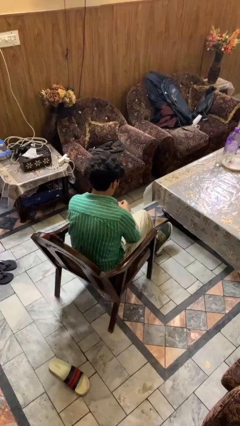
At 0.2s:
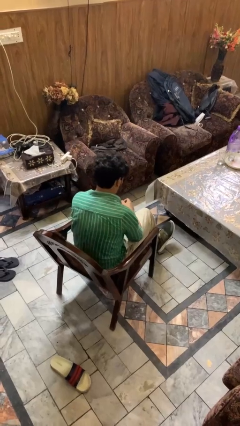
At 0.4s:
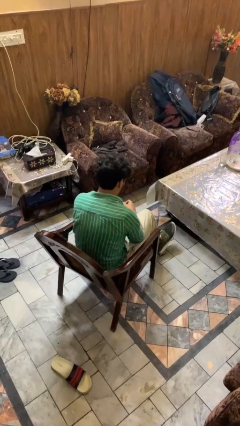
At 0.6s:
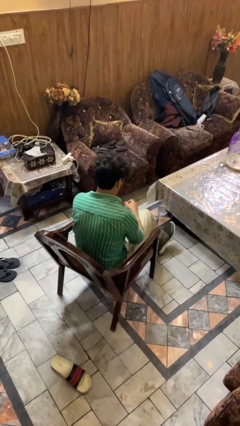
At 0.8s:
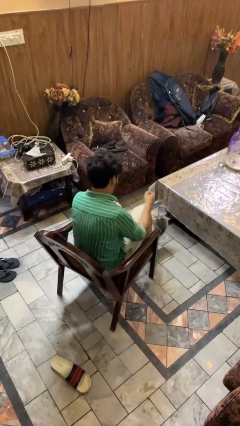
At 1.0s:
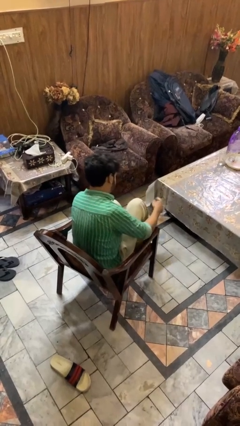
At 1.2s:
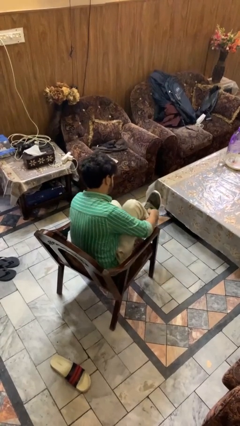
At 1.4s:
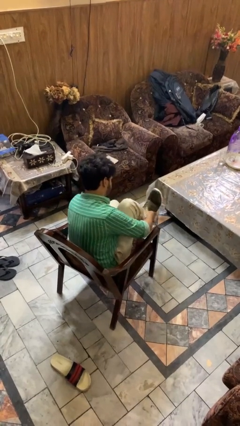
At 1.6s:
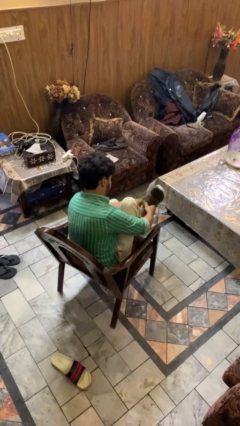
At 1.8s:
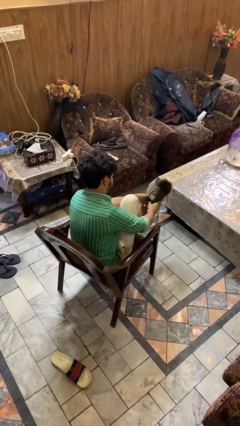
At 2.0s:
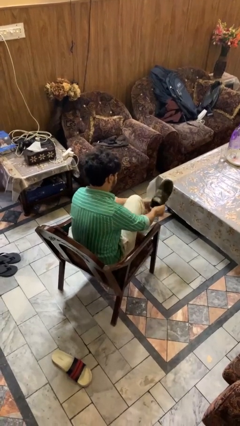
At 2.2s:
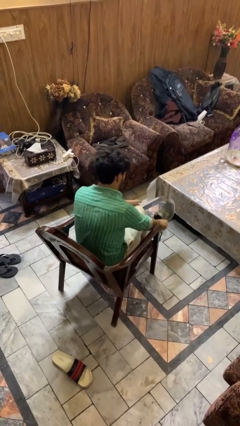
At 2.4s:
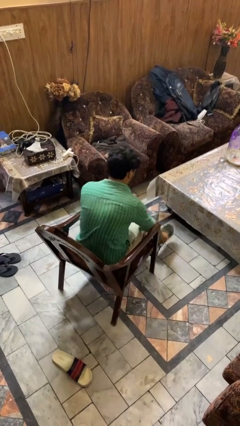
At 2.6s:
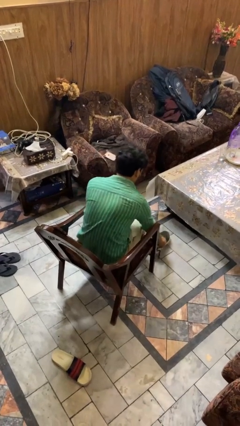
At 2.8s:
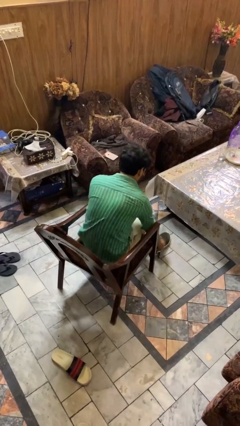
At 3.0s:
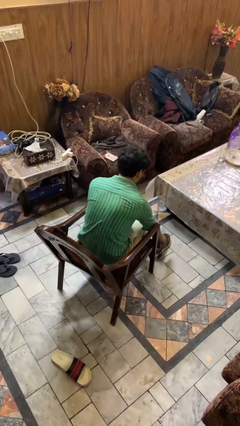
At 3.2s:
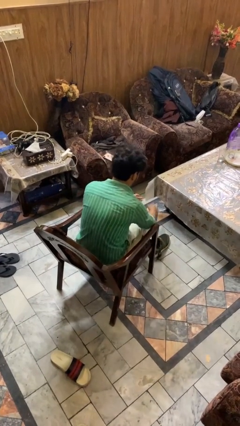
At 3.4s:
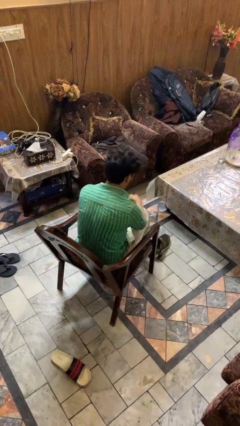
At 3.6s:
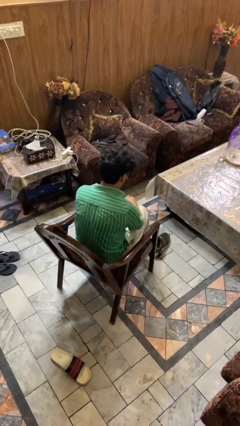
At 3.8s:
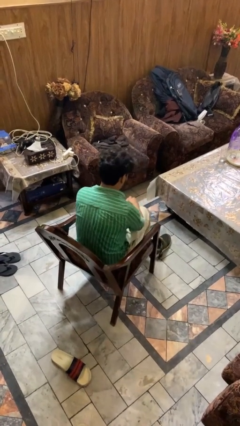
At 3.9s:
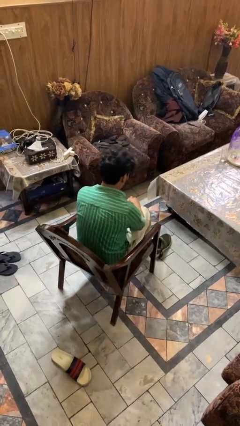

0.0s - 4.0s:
person takes off shoes

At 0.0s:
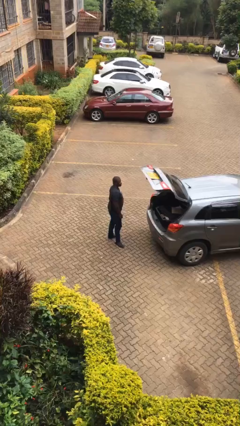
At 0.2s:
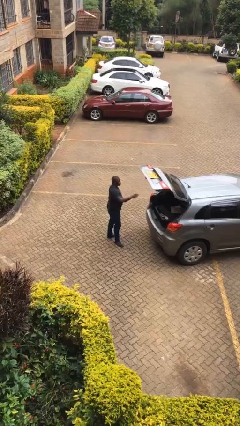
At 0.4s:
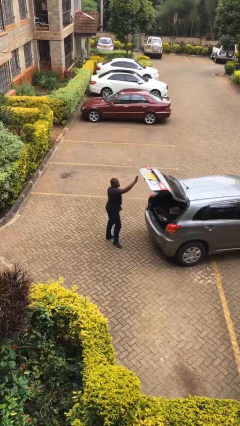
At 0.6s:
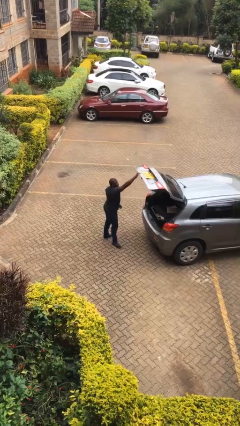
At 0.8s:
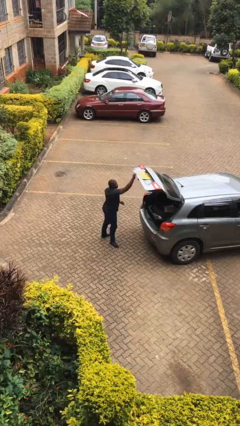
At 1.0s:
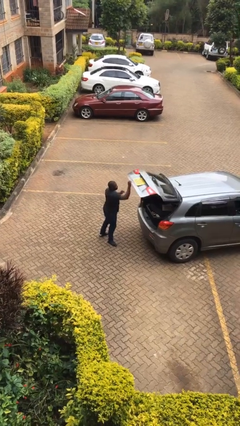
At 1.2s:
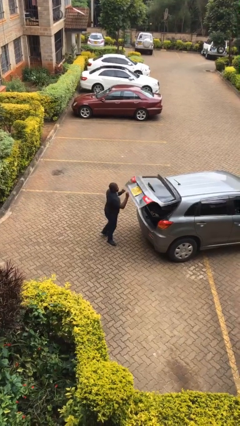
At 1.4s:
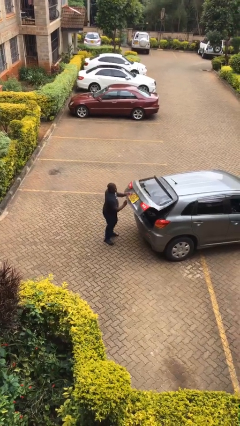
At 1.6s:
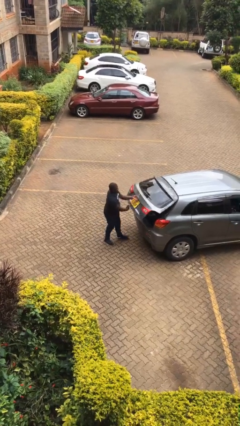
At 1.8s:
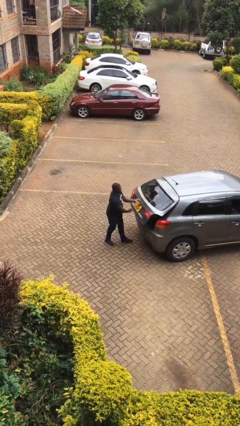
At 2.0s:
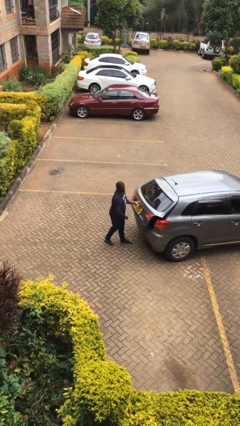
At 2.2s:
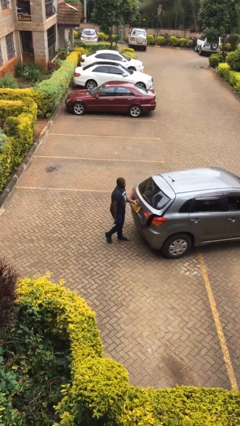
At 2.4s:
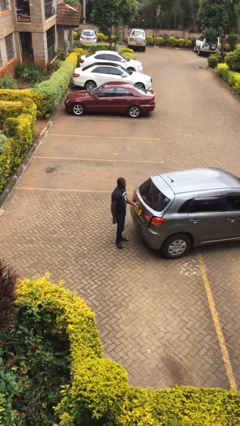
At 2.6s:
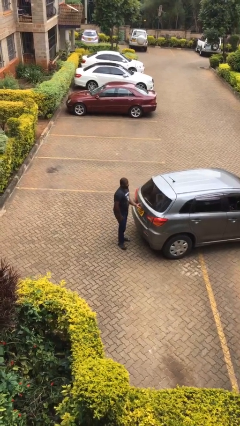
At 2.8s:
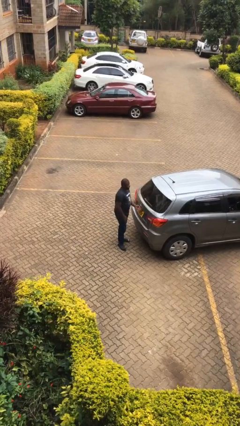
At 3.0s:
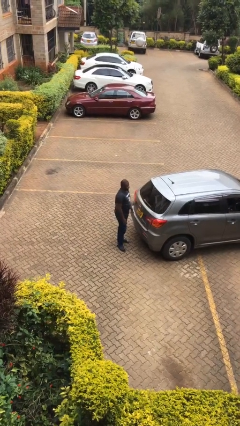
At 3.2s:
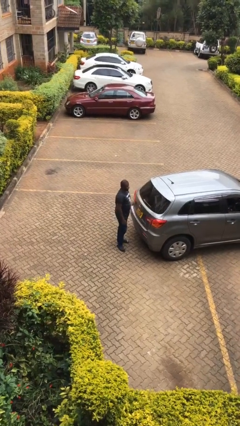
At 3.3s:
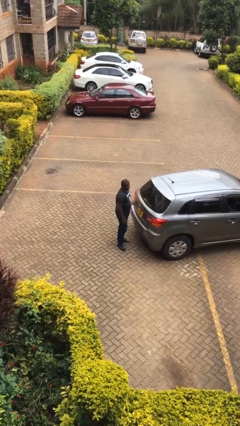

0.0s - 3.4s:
person closes car trunk

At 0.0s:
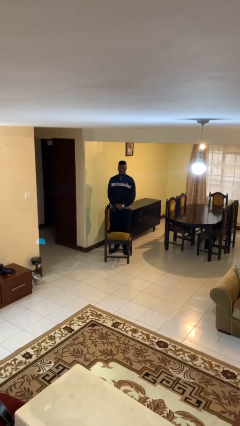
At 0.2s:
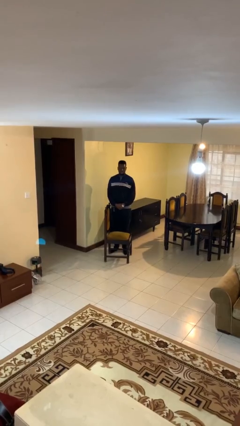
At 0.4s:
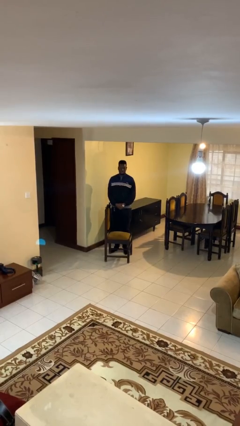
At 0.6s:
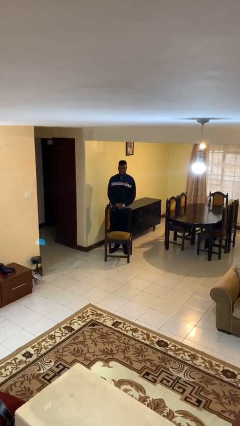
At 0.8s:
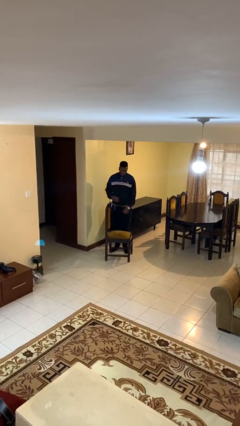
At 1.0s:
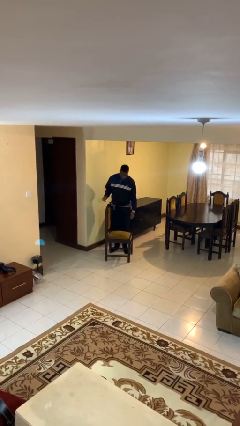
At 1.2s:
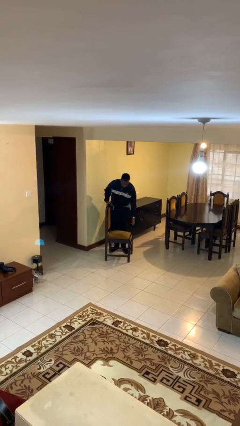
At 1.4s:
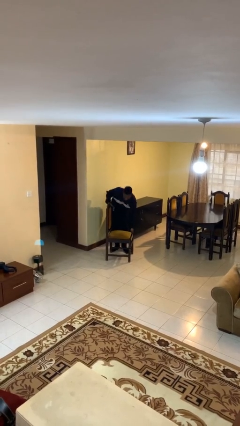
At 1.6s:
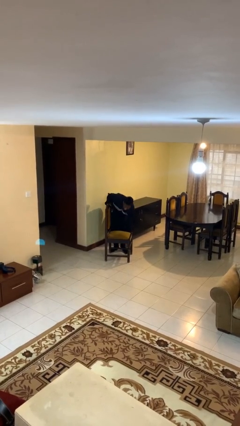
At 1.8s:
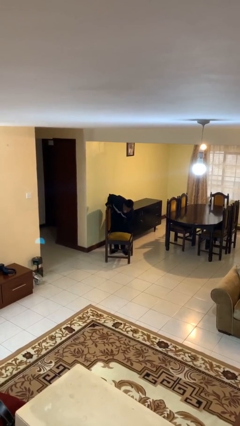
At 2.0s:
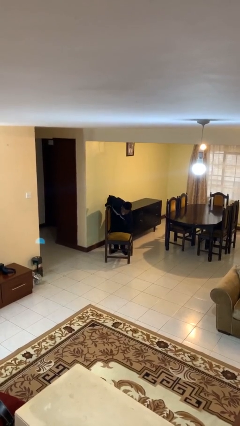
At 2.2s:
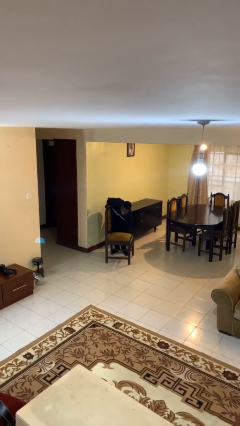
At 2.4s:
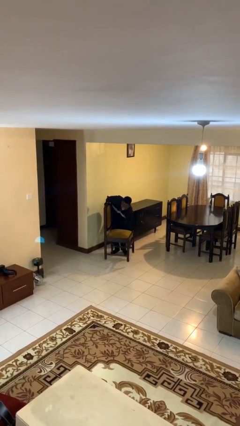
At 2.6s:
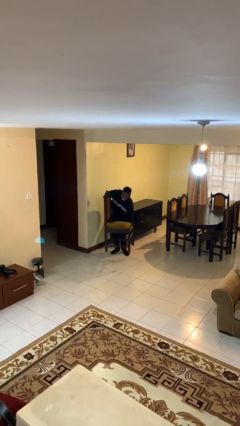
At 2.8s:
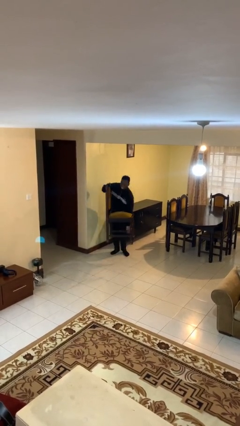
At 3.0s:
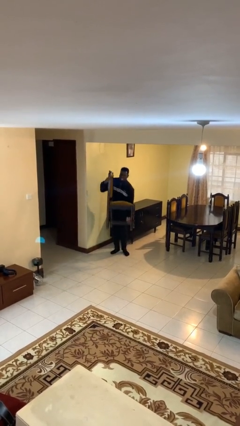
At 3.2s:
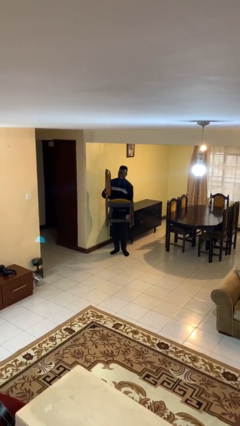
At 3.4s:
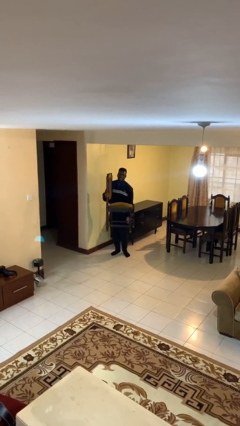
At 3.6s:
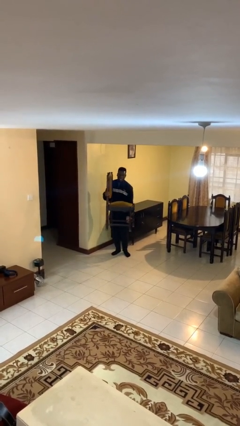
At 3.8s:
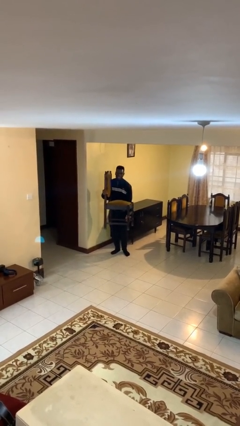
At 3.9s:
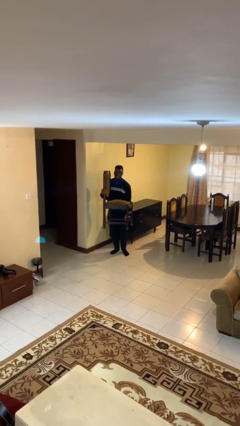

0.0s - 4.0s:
person picks up object from floor

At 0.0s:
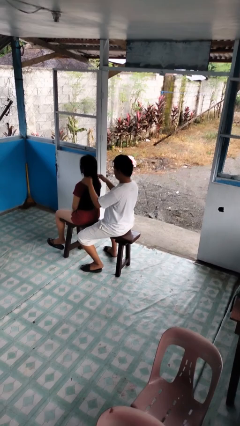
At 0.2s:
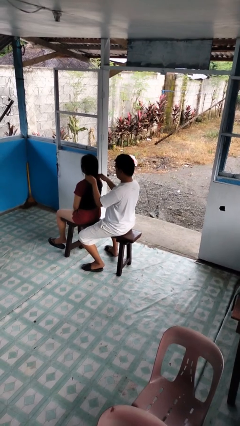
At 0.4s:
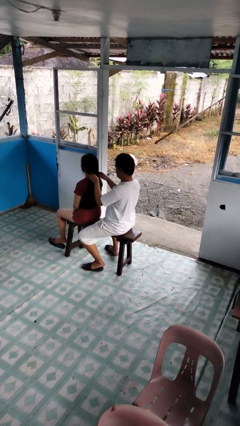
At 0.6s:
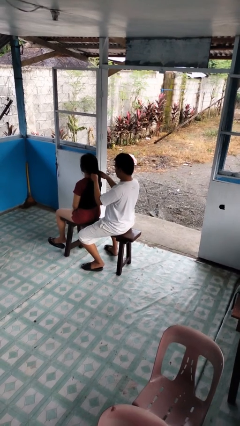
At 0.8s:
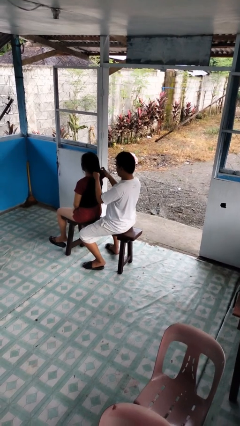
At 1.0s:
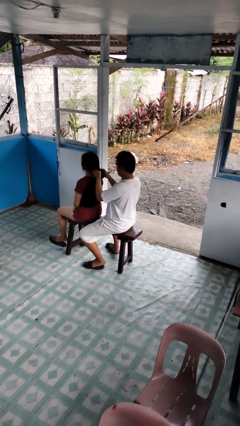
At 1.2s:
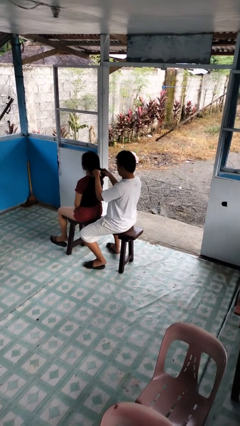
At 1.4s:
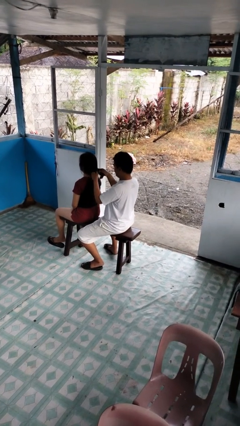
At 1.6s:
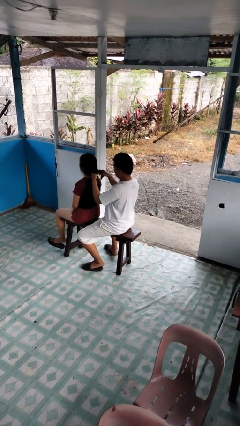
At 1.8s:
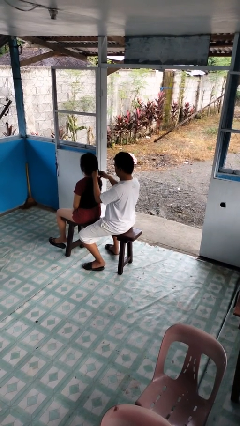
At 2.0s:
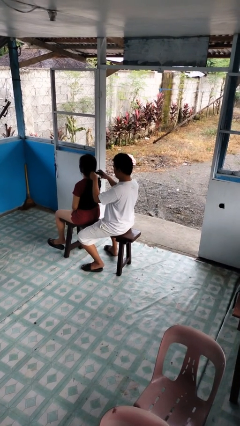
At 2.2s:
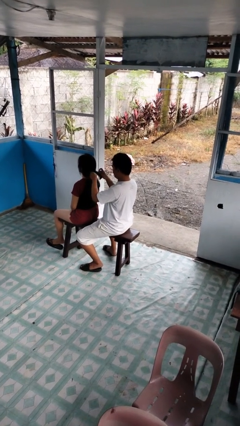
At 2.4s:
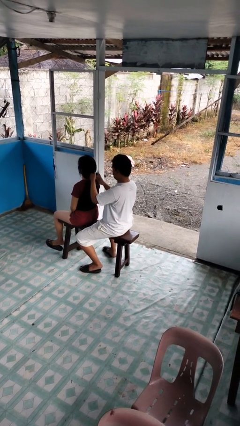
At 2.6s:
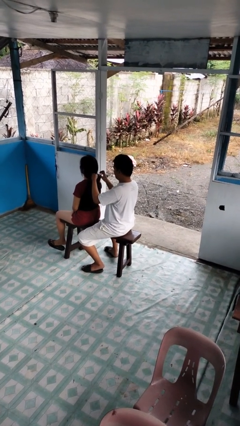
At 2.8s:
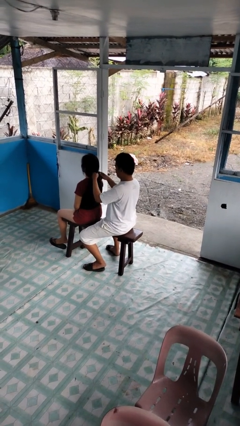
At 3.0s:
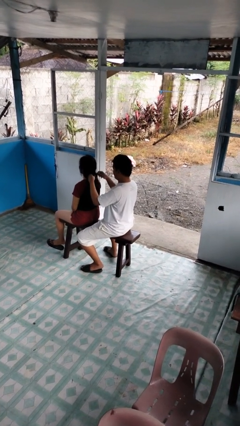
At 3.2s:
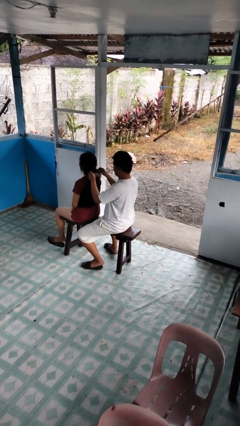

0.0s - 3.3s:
person braids hair of person

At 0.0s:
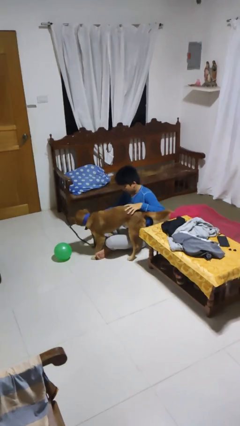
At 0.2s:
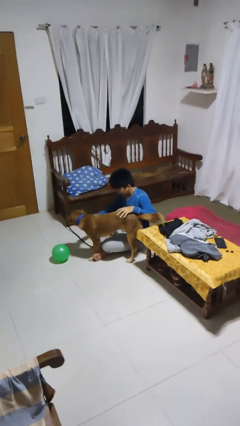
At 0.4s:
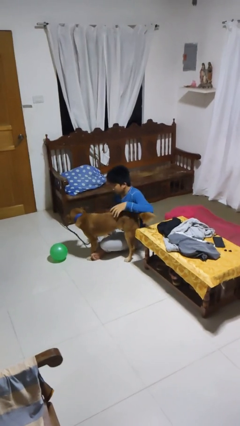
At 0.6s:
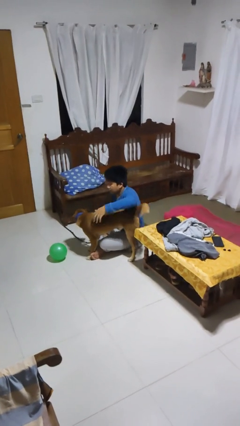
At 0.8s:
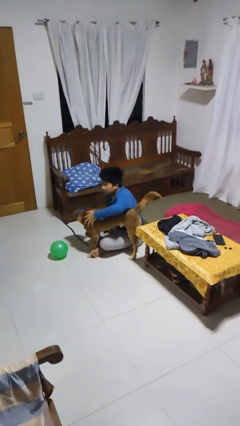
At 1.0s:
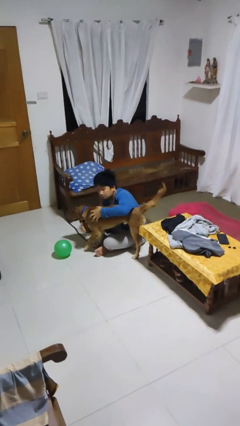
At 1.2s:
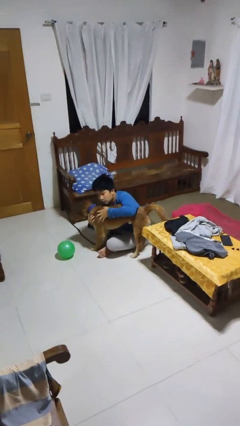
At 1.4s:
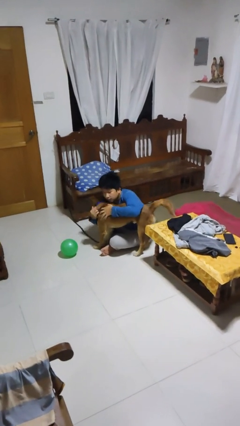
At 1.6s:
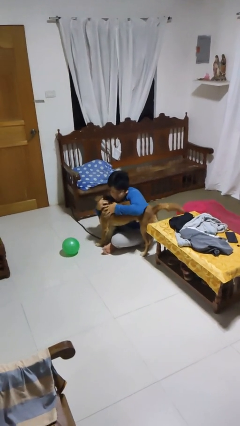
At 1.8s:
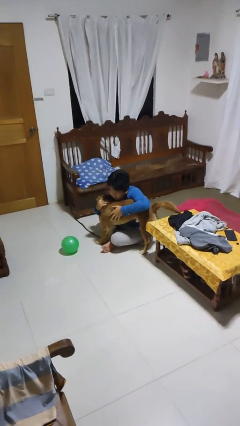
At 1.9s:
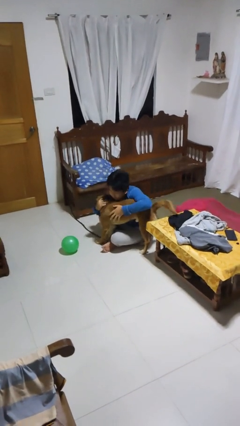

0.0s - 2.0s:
person hugs dog

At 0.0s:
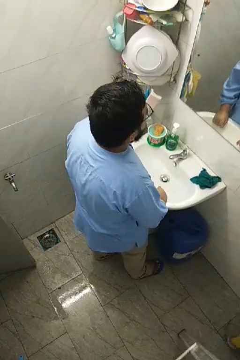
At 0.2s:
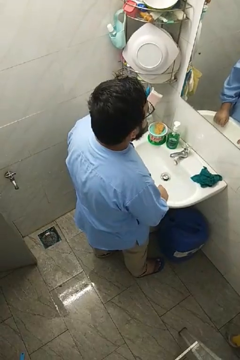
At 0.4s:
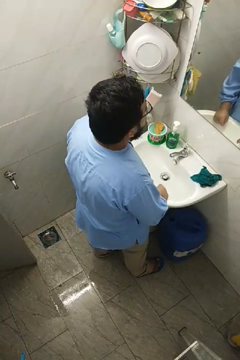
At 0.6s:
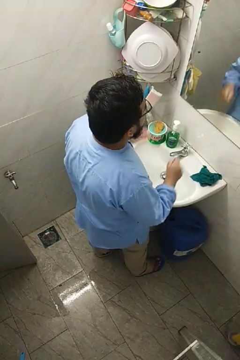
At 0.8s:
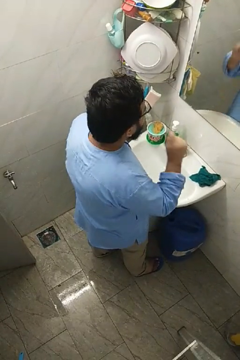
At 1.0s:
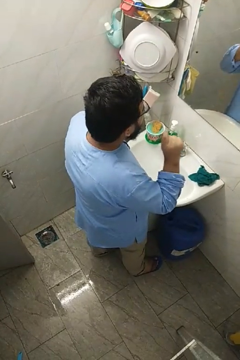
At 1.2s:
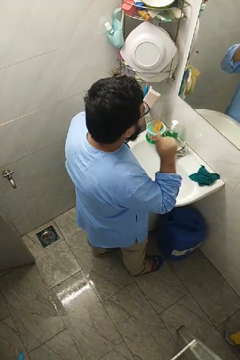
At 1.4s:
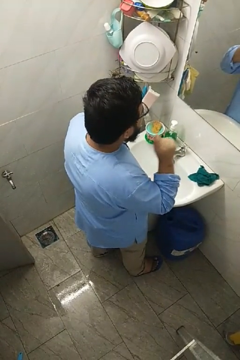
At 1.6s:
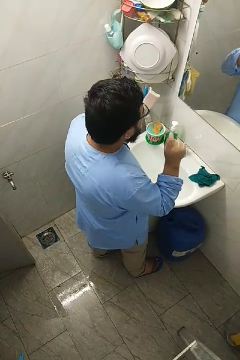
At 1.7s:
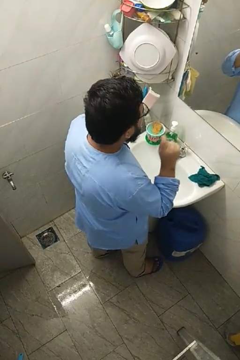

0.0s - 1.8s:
person flosses
